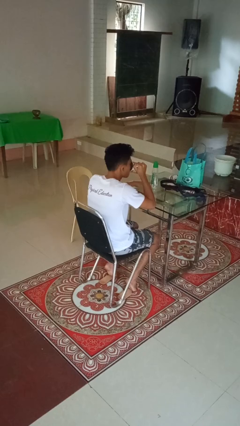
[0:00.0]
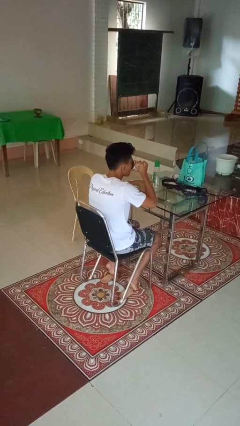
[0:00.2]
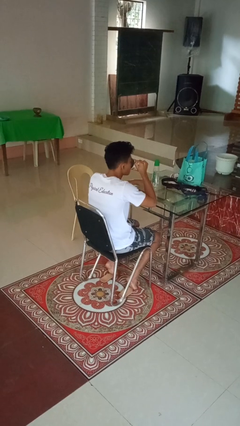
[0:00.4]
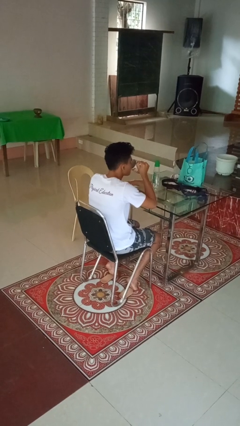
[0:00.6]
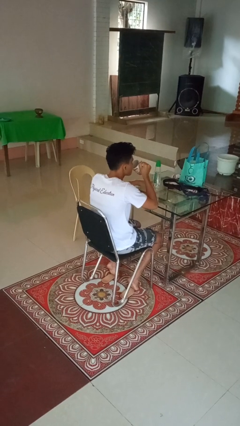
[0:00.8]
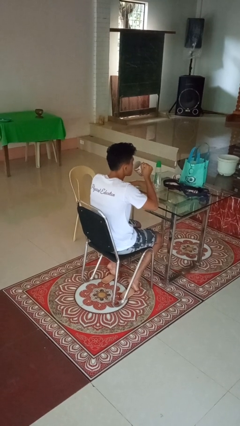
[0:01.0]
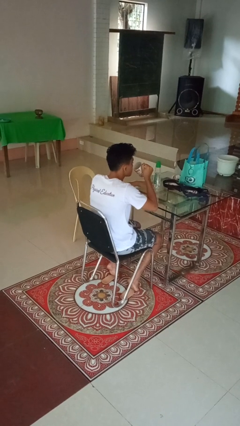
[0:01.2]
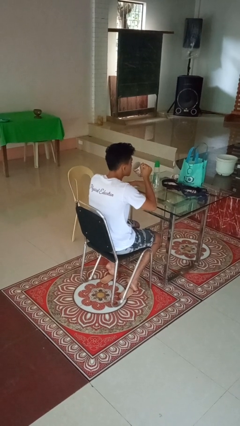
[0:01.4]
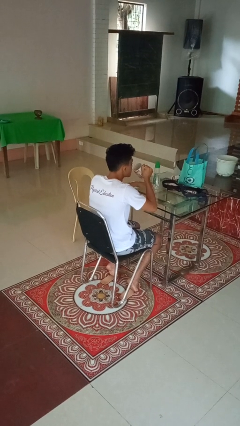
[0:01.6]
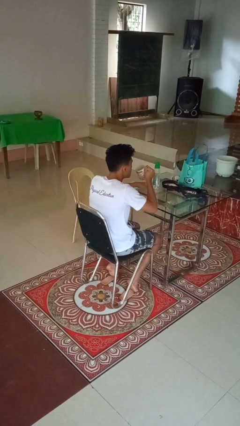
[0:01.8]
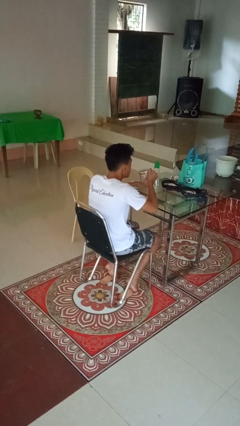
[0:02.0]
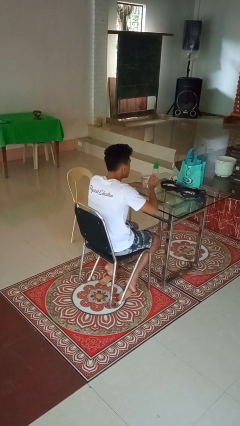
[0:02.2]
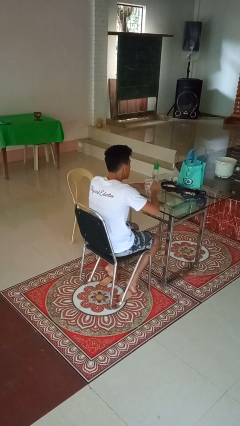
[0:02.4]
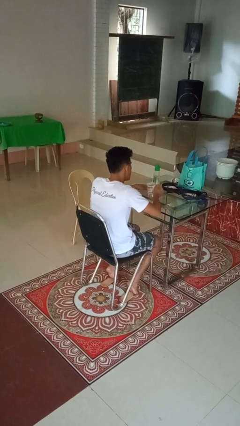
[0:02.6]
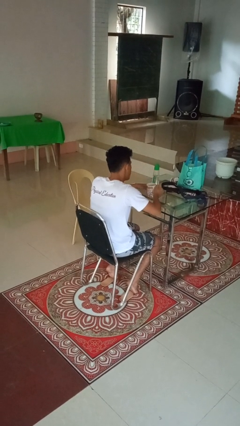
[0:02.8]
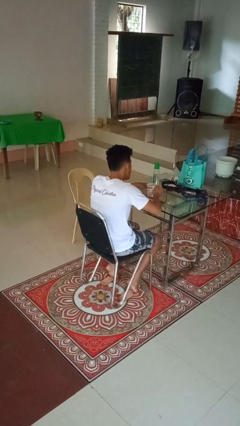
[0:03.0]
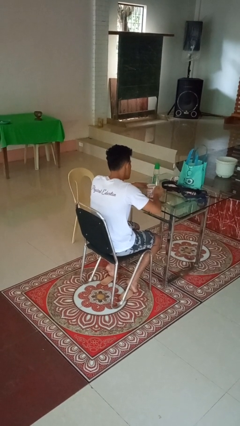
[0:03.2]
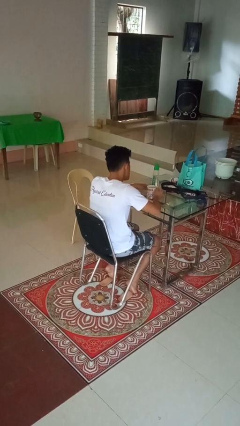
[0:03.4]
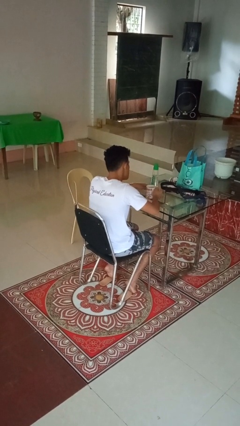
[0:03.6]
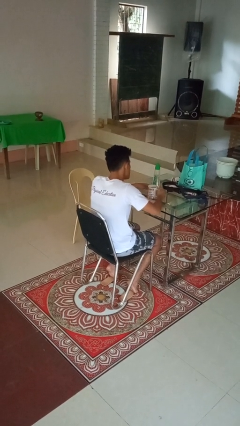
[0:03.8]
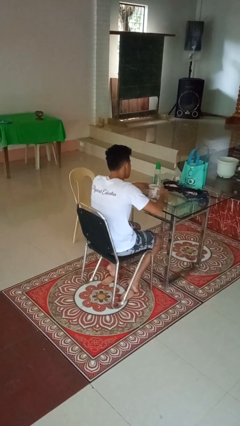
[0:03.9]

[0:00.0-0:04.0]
person drinks from shotglass

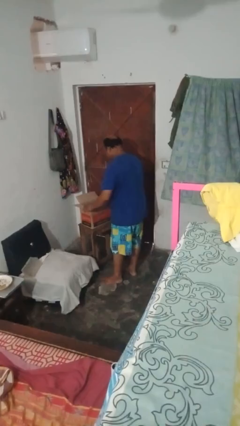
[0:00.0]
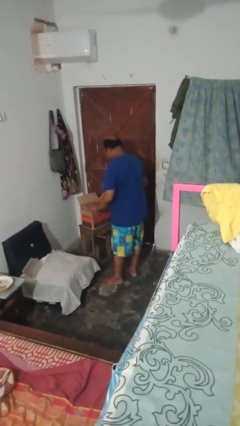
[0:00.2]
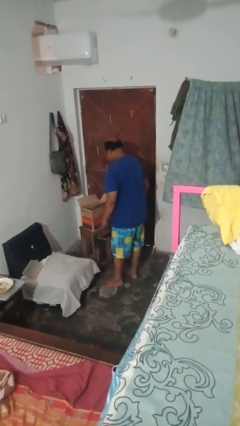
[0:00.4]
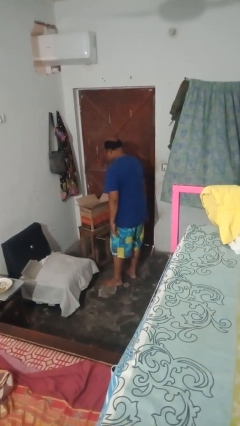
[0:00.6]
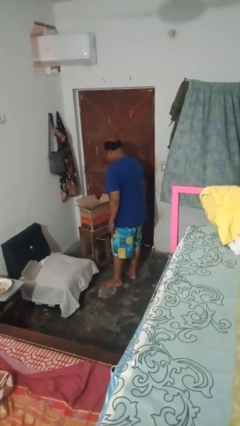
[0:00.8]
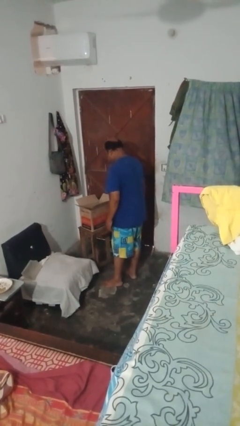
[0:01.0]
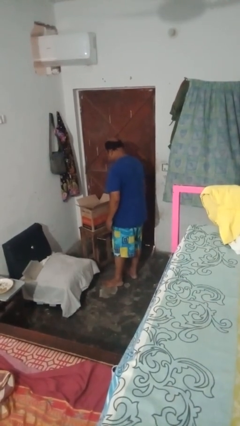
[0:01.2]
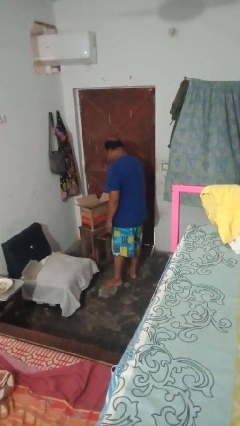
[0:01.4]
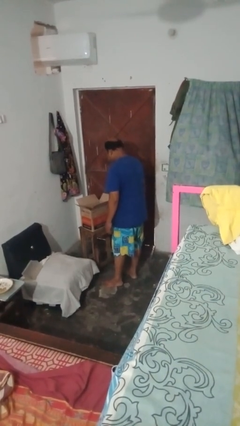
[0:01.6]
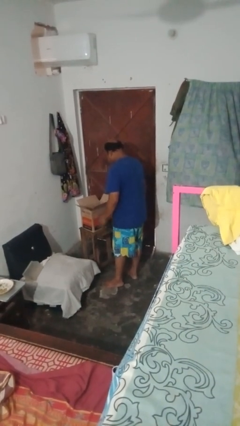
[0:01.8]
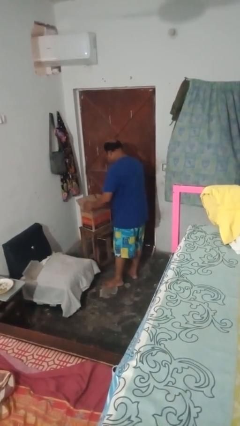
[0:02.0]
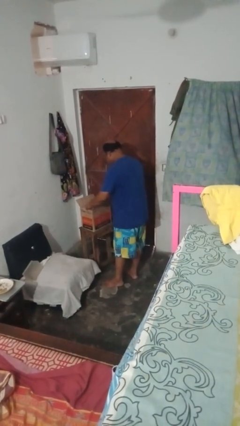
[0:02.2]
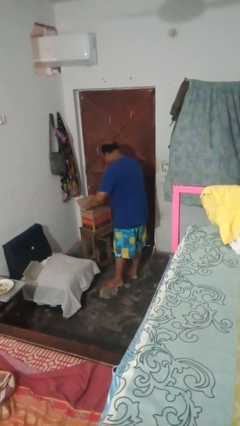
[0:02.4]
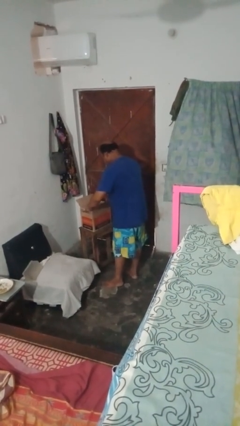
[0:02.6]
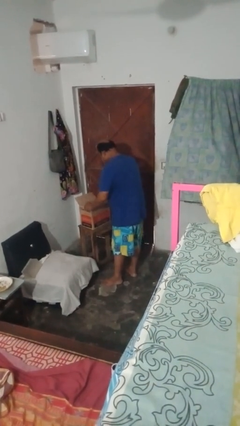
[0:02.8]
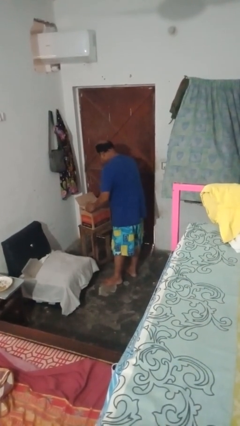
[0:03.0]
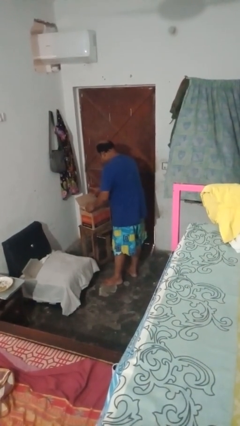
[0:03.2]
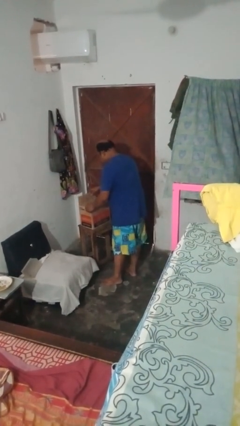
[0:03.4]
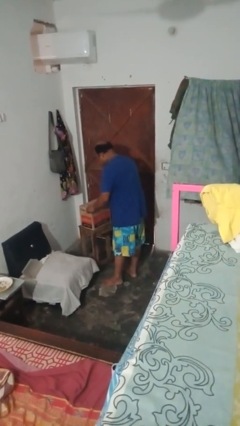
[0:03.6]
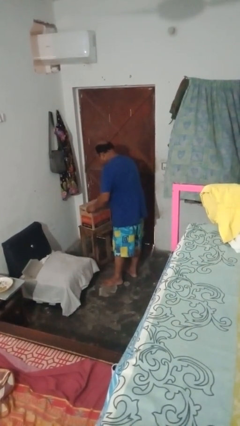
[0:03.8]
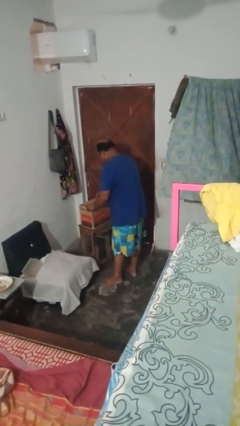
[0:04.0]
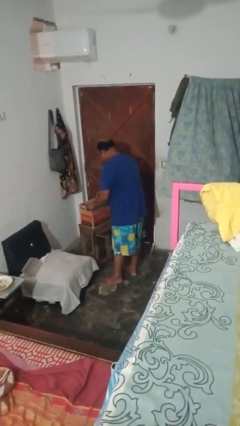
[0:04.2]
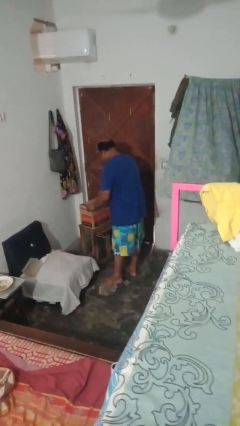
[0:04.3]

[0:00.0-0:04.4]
person closes box

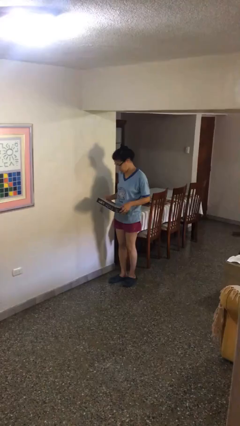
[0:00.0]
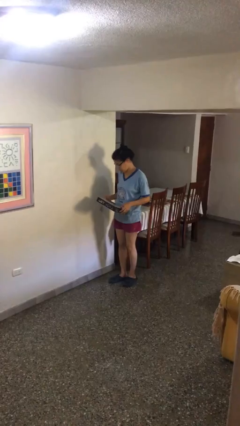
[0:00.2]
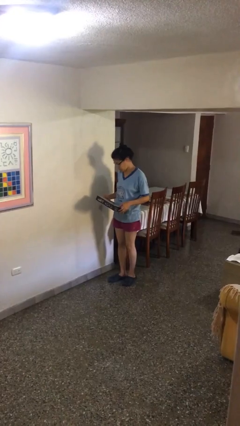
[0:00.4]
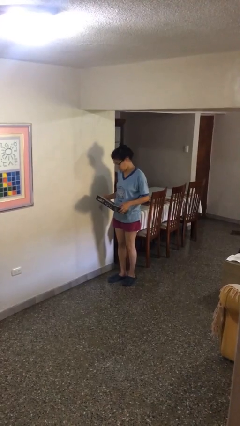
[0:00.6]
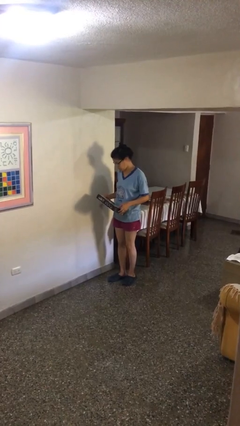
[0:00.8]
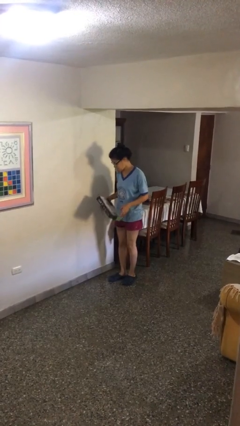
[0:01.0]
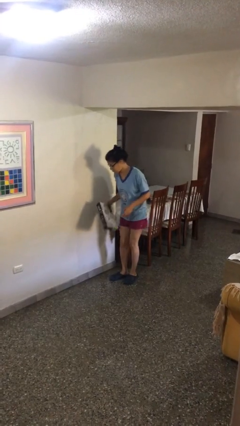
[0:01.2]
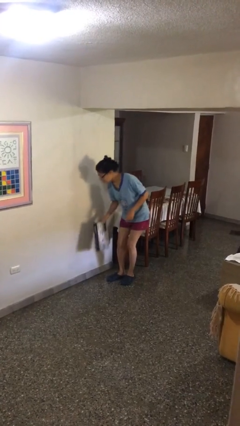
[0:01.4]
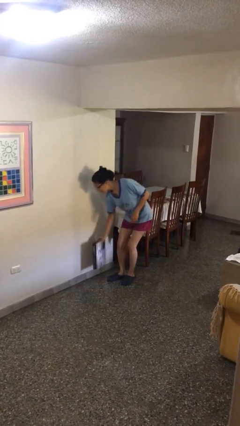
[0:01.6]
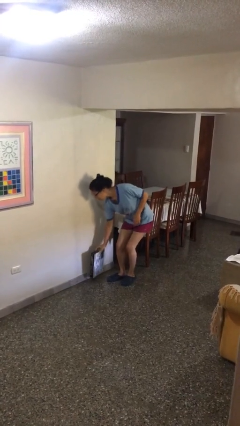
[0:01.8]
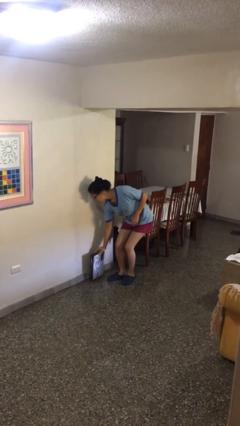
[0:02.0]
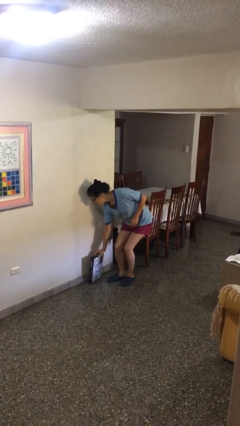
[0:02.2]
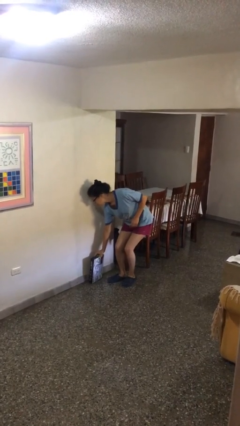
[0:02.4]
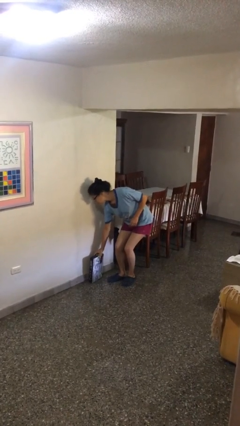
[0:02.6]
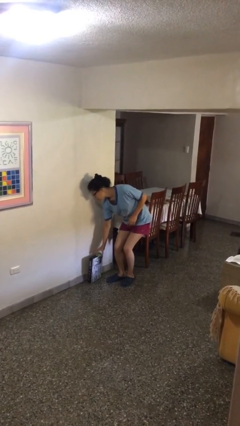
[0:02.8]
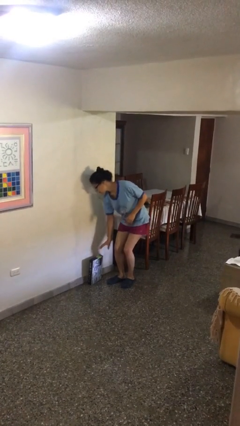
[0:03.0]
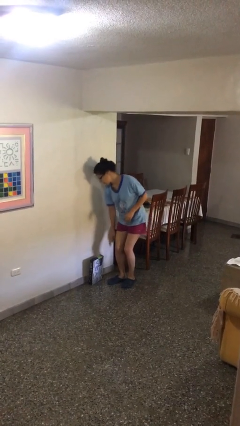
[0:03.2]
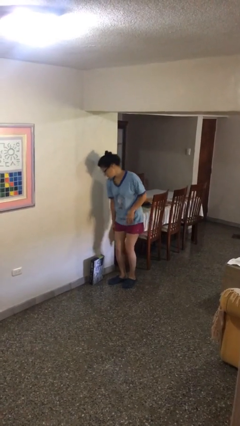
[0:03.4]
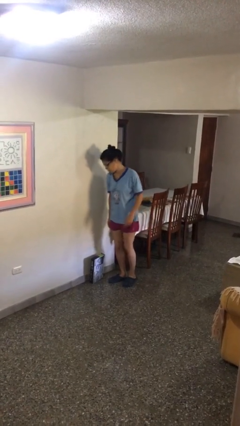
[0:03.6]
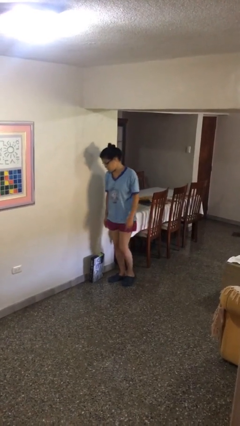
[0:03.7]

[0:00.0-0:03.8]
person puts down object on floor

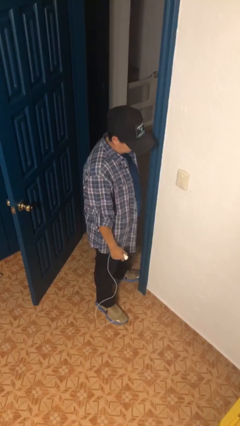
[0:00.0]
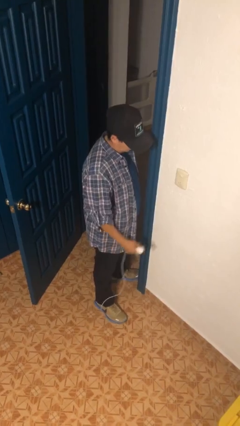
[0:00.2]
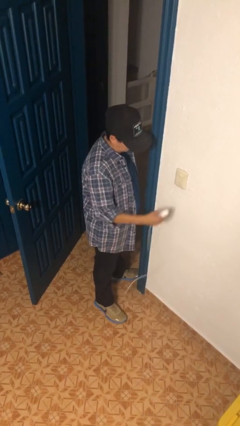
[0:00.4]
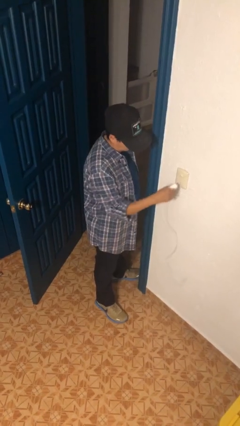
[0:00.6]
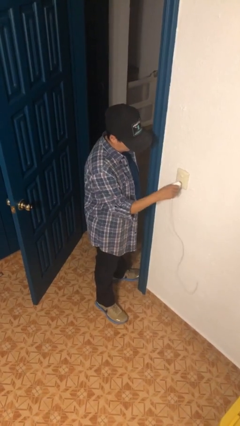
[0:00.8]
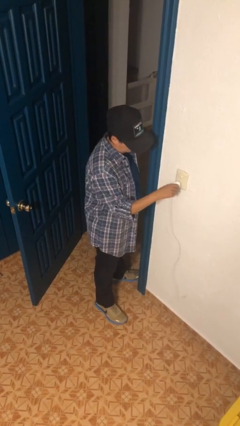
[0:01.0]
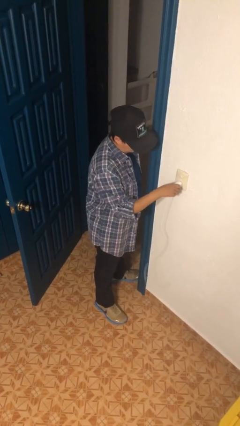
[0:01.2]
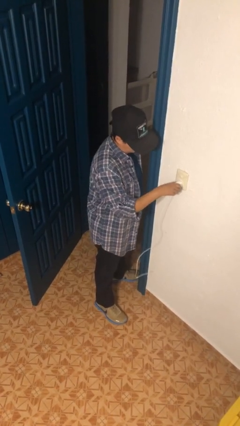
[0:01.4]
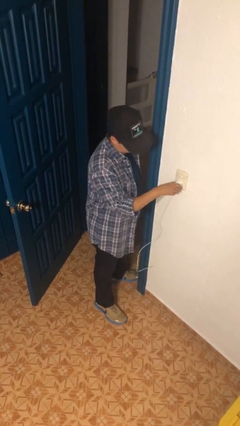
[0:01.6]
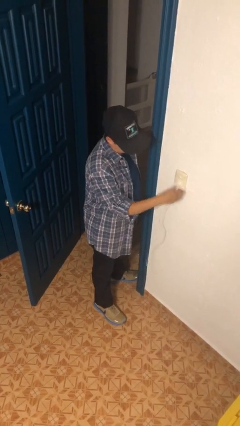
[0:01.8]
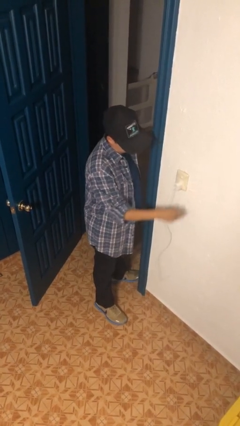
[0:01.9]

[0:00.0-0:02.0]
person plugs into electrical socket

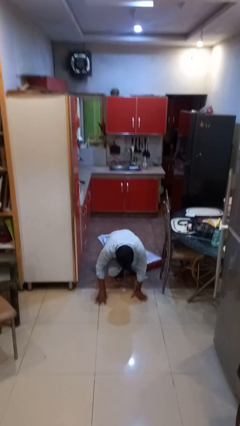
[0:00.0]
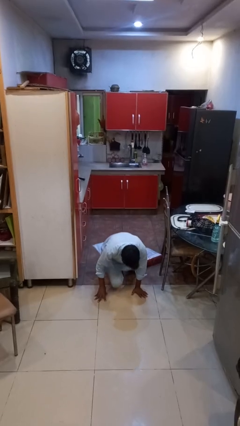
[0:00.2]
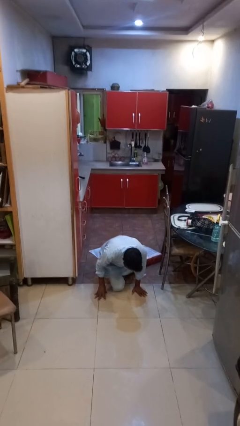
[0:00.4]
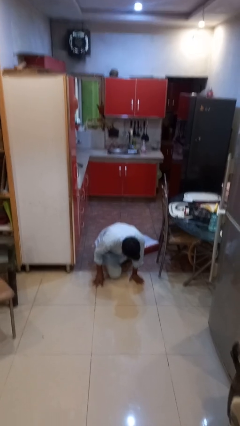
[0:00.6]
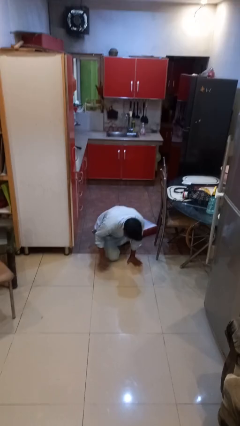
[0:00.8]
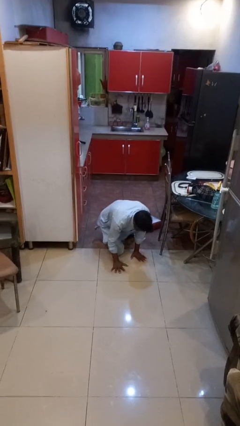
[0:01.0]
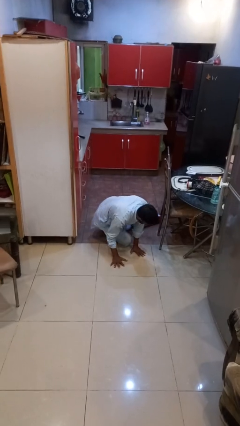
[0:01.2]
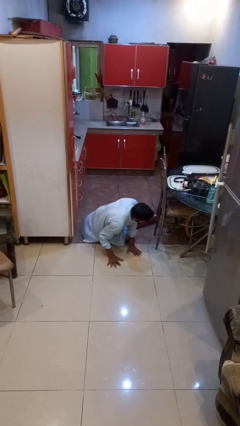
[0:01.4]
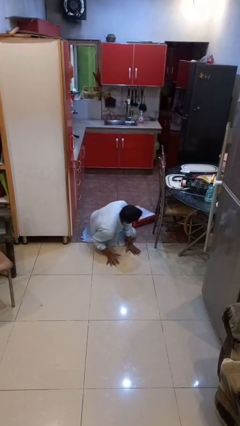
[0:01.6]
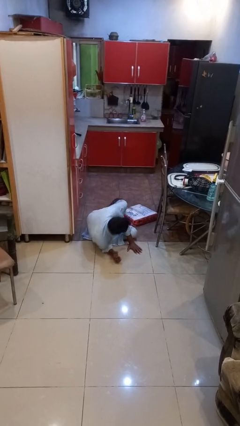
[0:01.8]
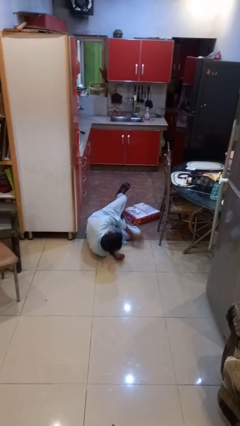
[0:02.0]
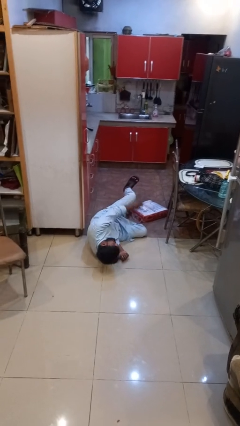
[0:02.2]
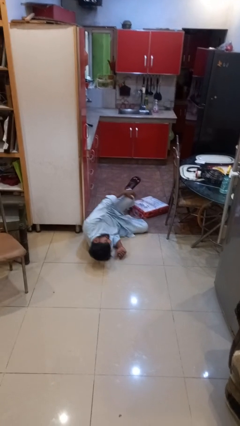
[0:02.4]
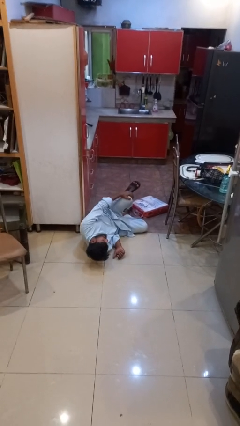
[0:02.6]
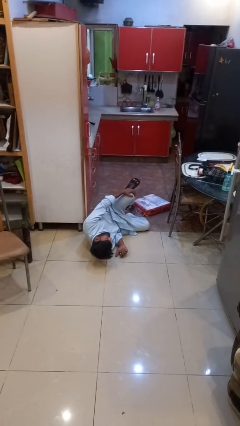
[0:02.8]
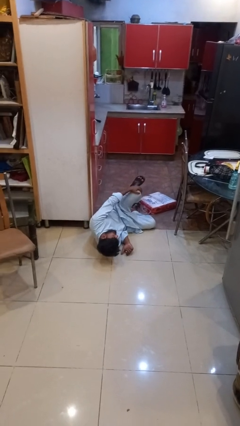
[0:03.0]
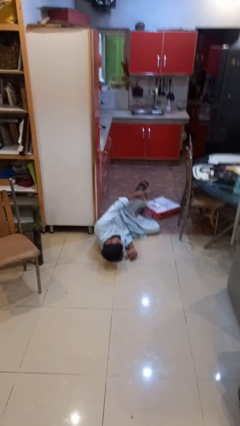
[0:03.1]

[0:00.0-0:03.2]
person lies down on floor

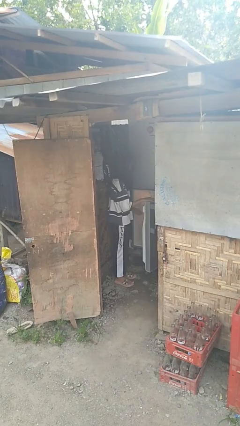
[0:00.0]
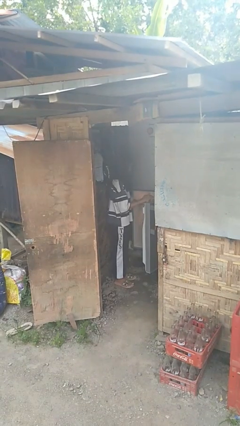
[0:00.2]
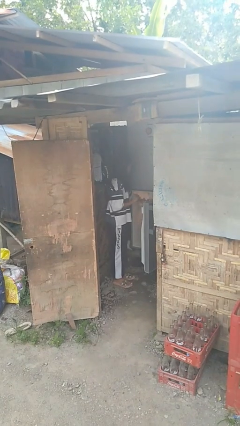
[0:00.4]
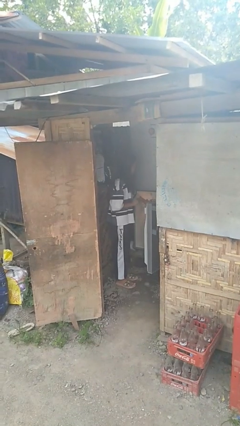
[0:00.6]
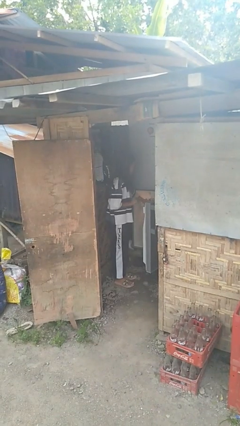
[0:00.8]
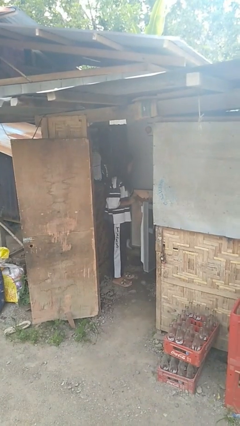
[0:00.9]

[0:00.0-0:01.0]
person opens refrigerator
